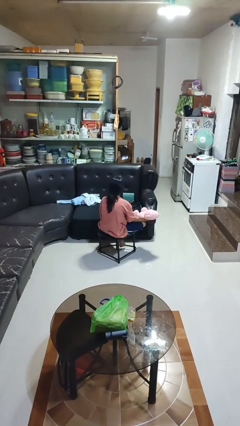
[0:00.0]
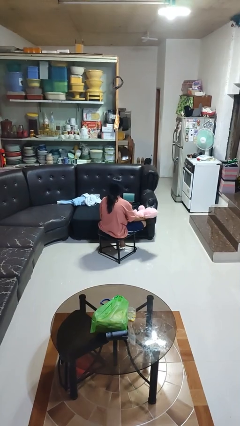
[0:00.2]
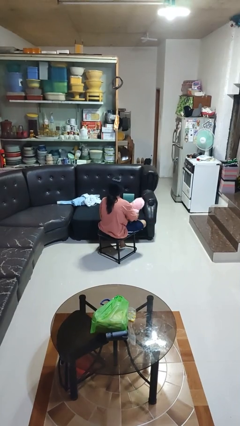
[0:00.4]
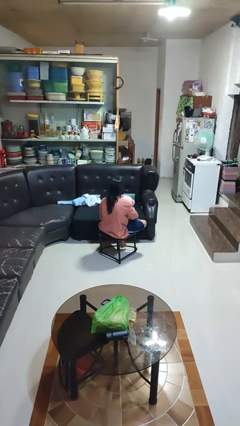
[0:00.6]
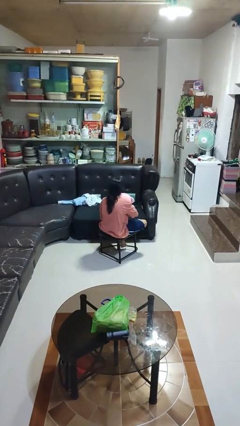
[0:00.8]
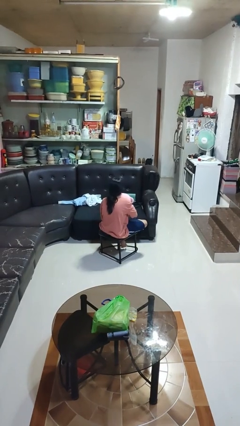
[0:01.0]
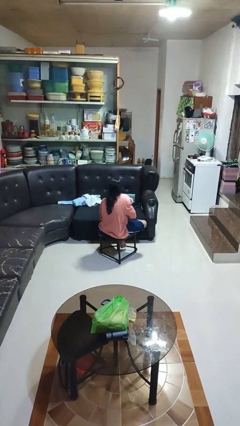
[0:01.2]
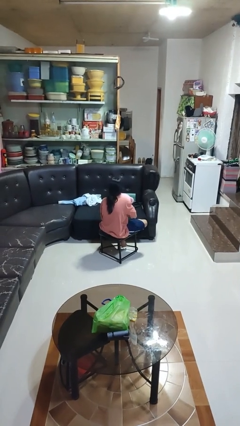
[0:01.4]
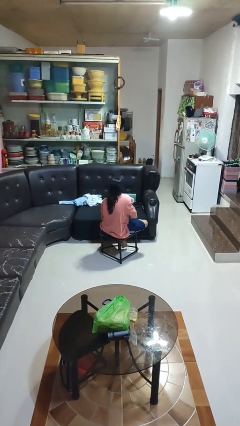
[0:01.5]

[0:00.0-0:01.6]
person hugs stuffed animal

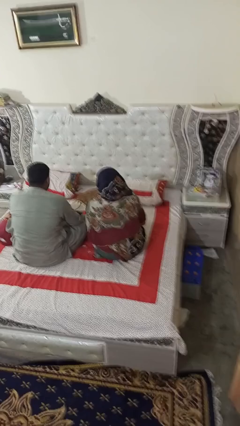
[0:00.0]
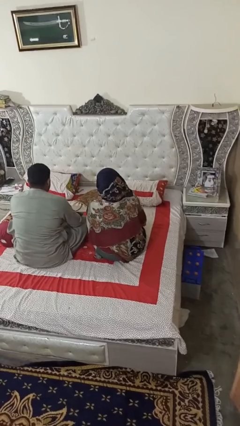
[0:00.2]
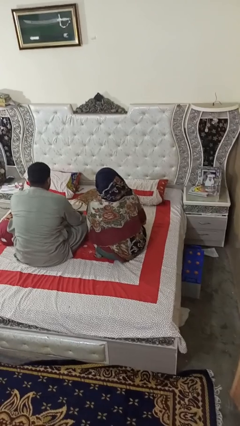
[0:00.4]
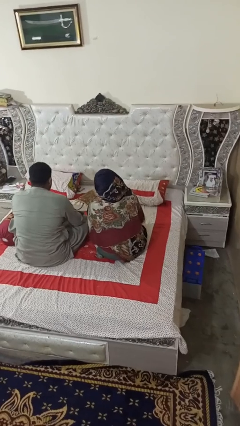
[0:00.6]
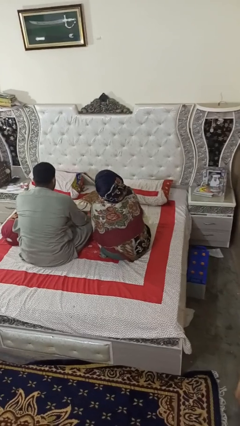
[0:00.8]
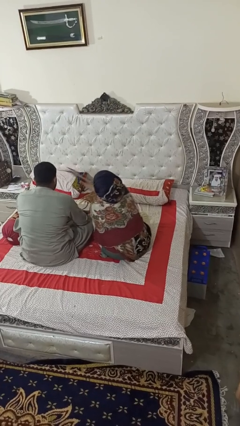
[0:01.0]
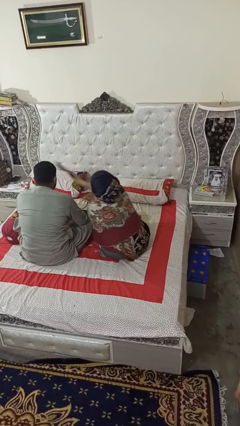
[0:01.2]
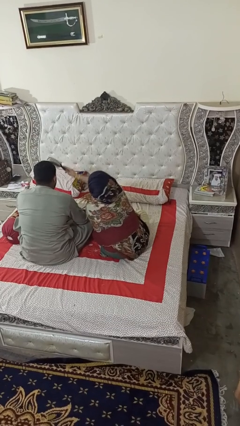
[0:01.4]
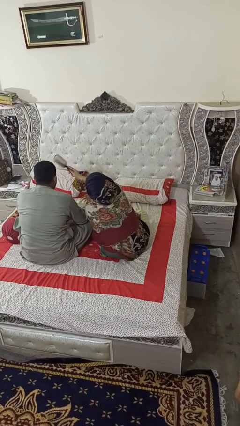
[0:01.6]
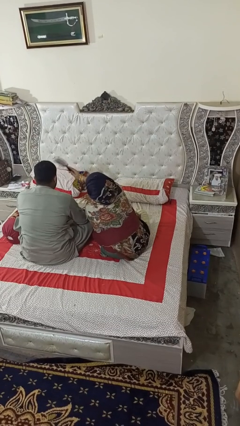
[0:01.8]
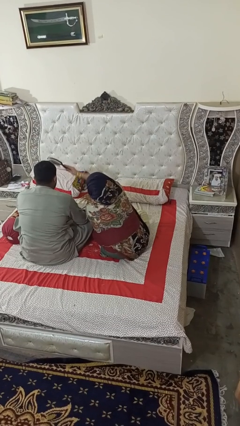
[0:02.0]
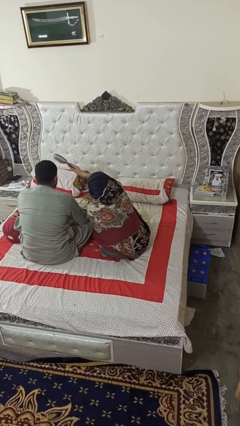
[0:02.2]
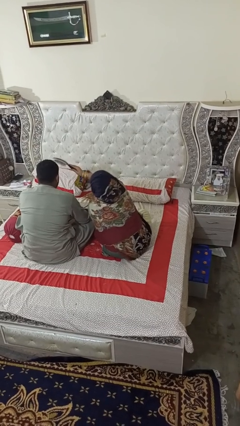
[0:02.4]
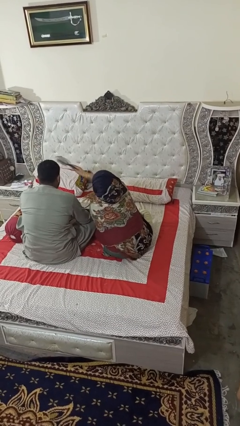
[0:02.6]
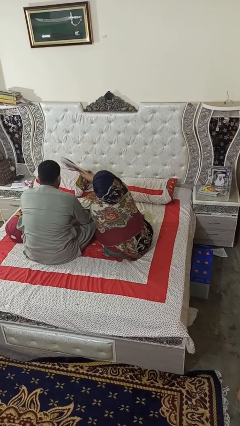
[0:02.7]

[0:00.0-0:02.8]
person brushes hair of person

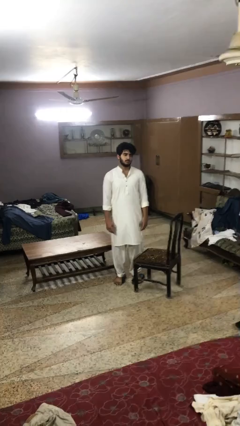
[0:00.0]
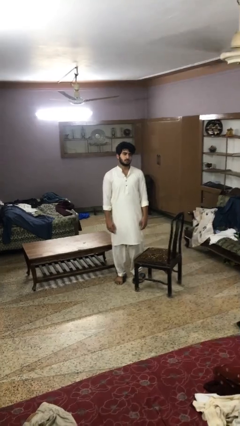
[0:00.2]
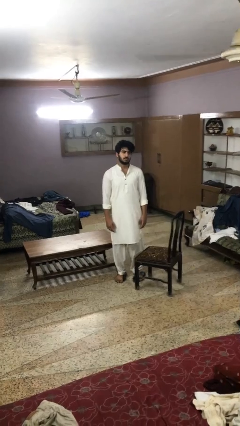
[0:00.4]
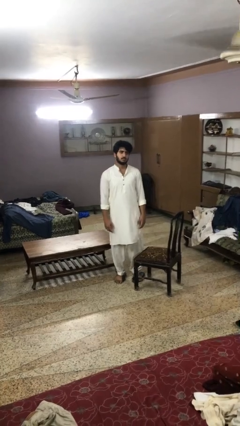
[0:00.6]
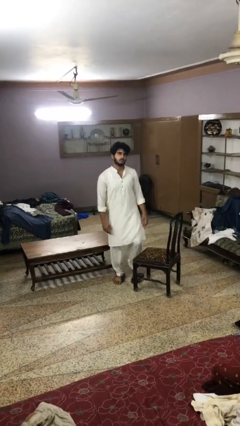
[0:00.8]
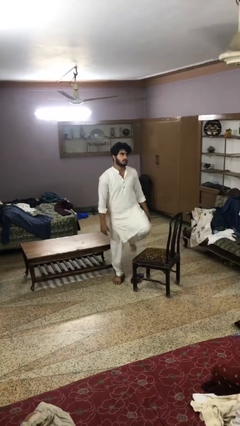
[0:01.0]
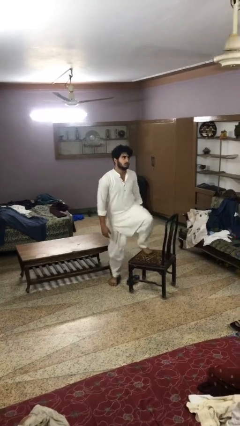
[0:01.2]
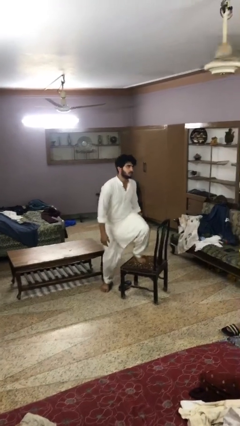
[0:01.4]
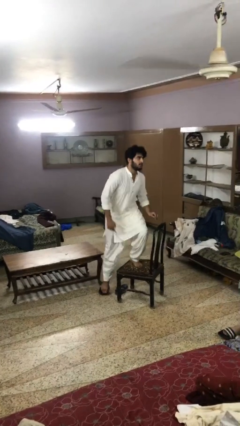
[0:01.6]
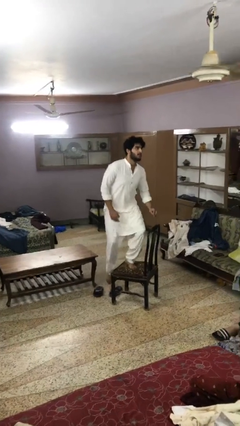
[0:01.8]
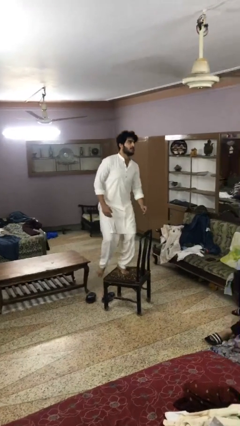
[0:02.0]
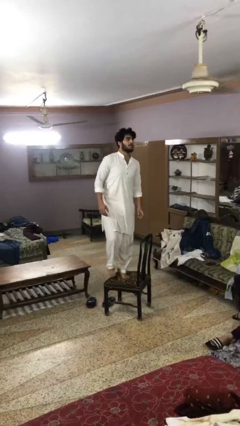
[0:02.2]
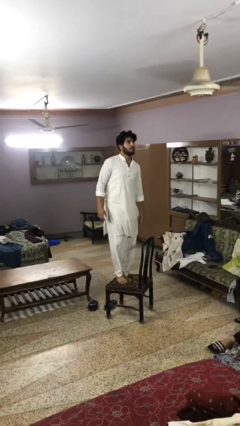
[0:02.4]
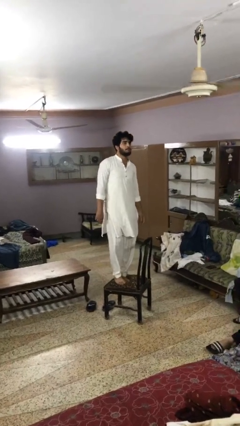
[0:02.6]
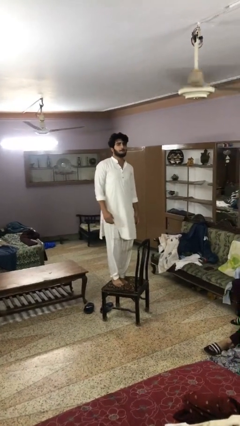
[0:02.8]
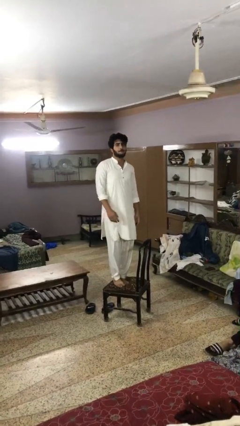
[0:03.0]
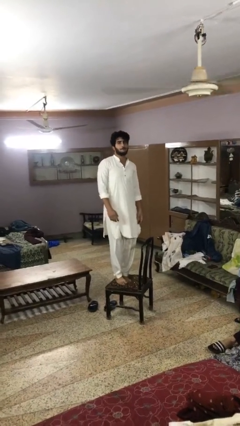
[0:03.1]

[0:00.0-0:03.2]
person climbs on chair

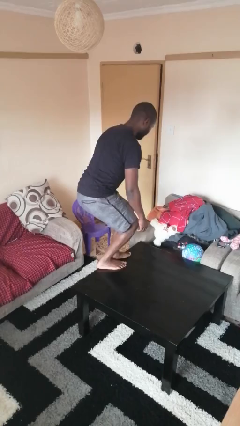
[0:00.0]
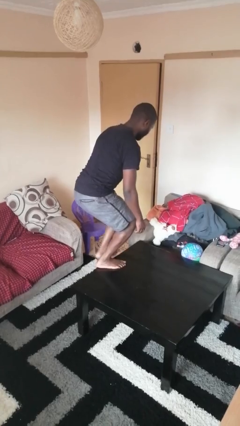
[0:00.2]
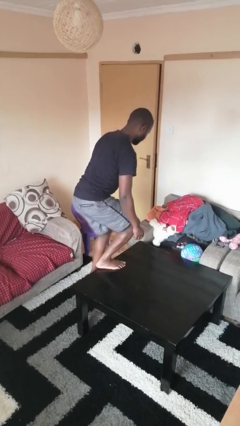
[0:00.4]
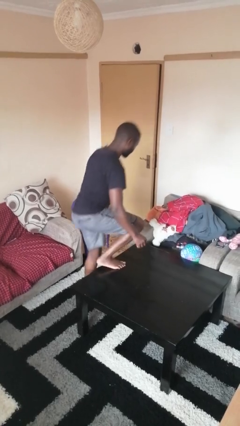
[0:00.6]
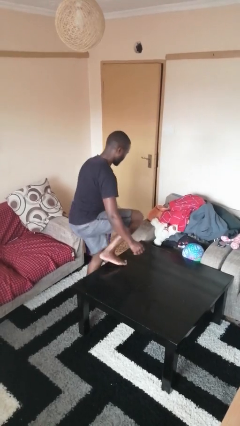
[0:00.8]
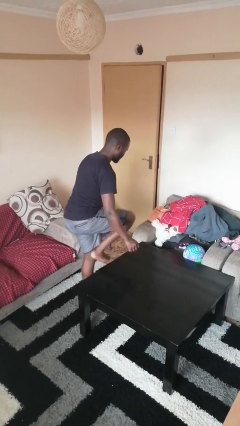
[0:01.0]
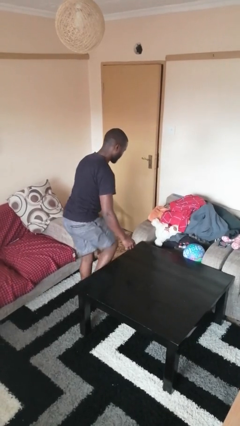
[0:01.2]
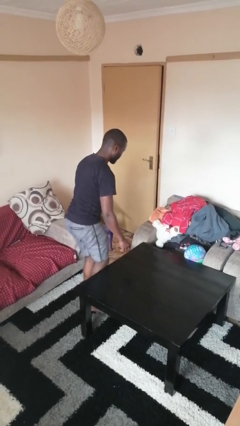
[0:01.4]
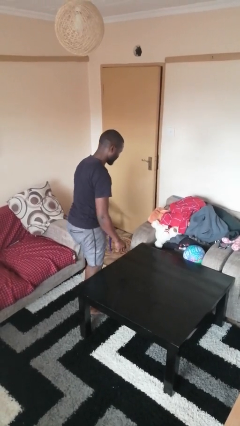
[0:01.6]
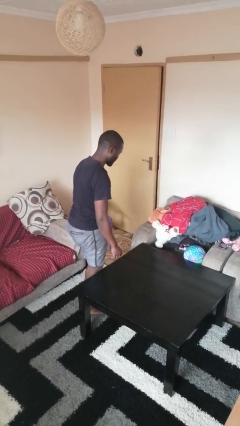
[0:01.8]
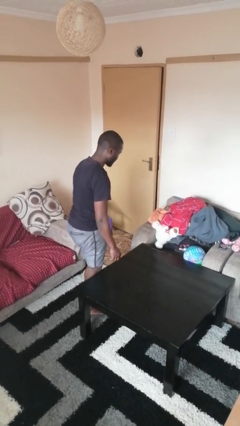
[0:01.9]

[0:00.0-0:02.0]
person climbs off table

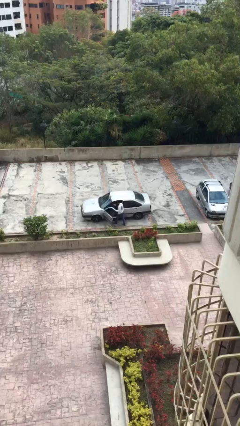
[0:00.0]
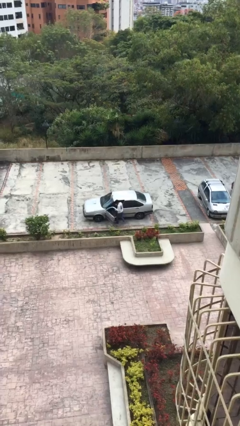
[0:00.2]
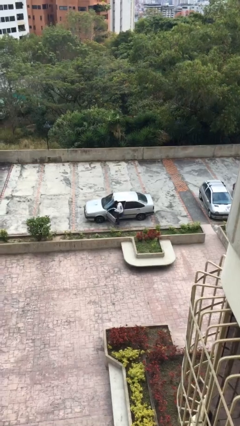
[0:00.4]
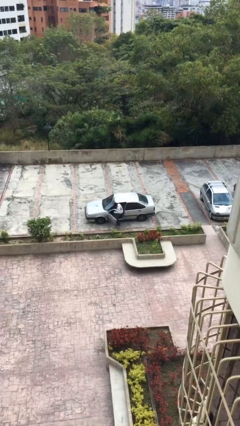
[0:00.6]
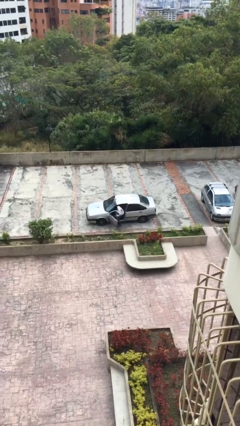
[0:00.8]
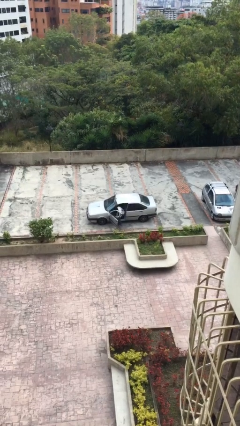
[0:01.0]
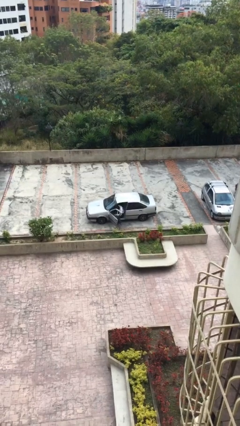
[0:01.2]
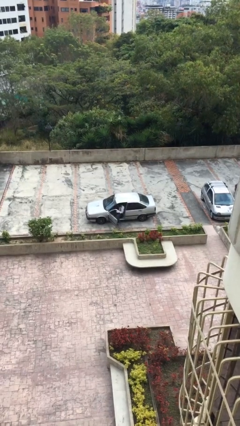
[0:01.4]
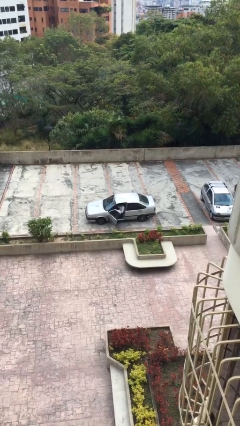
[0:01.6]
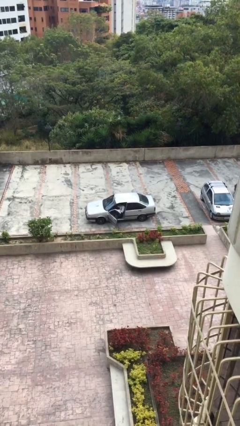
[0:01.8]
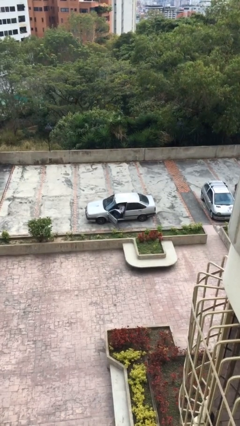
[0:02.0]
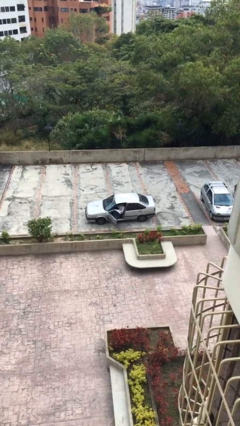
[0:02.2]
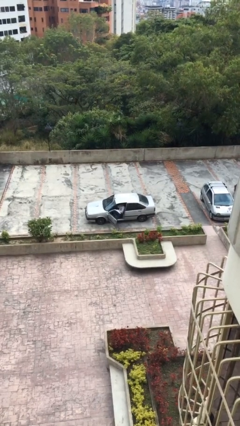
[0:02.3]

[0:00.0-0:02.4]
person enters car

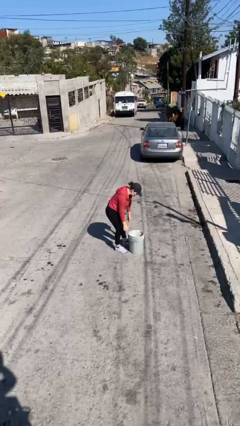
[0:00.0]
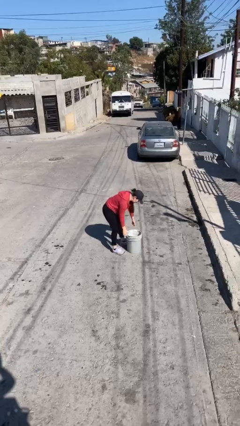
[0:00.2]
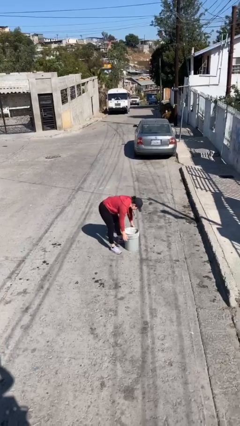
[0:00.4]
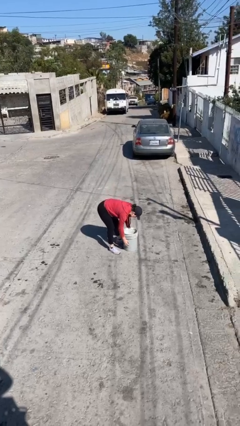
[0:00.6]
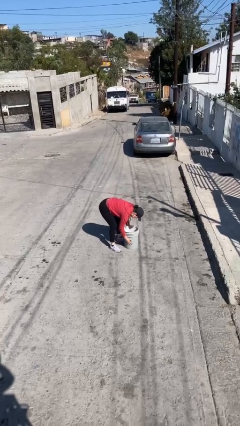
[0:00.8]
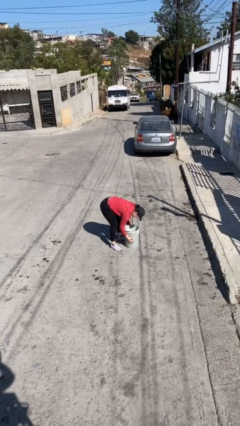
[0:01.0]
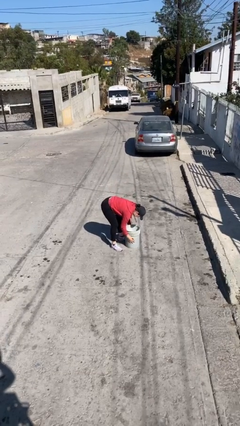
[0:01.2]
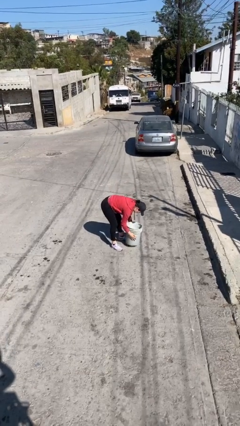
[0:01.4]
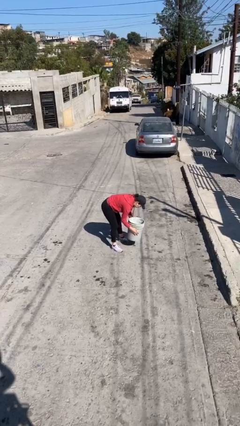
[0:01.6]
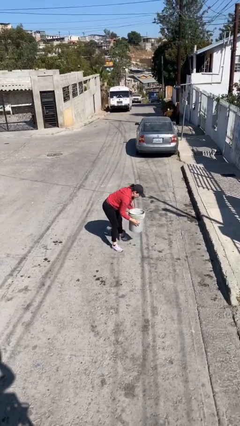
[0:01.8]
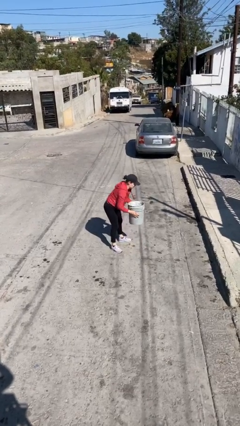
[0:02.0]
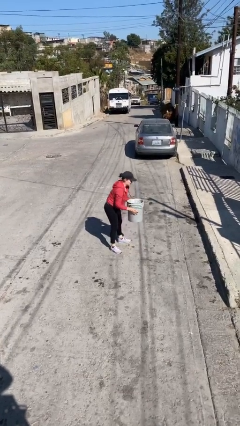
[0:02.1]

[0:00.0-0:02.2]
person picks up object from floor

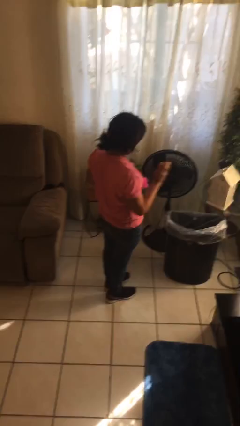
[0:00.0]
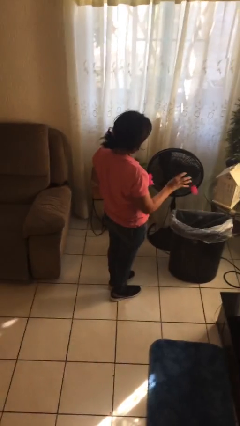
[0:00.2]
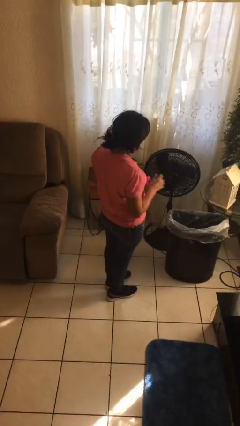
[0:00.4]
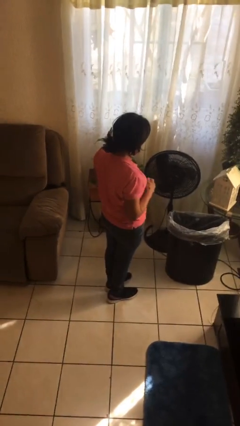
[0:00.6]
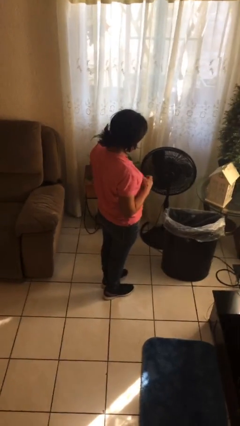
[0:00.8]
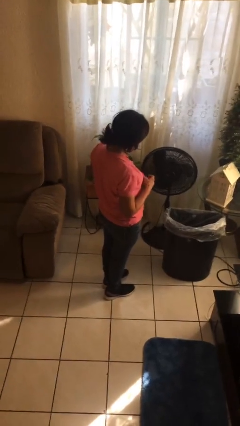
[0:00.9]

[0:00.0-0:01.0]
person discards trash

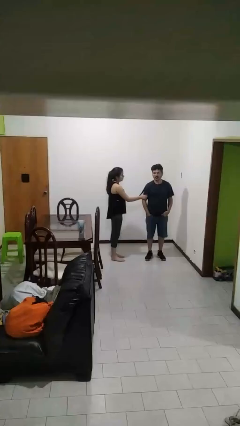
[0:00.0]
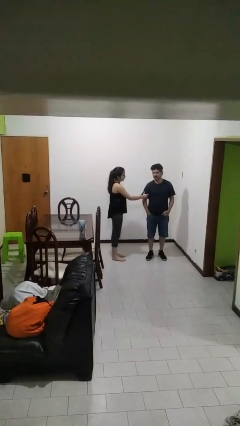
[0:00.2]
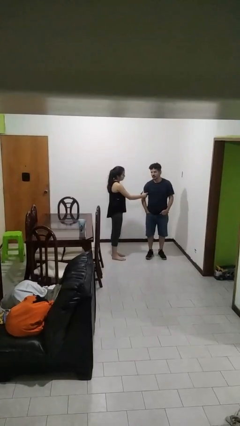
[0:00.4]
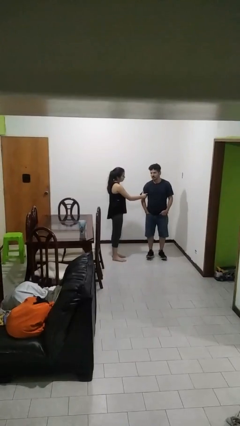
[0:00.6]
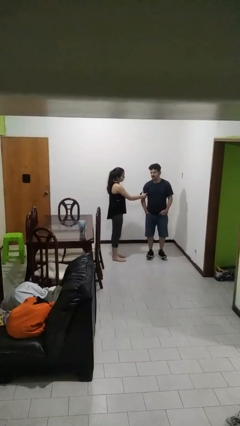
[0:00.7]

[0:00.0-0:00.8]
person grabs person by bicep

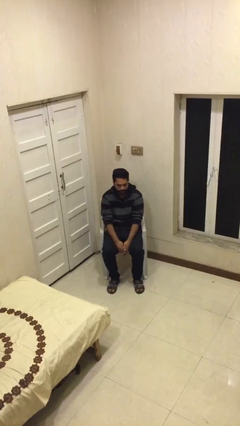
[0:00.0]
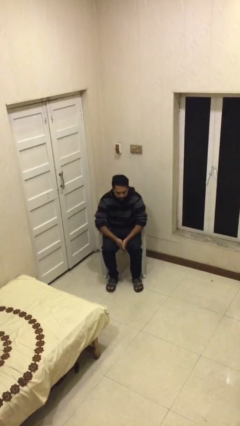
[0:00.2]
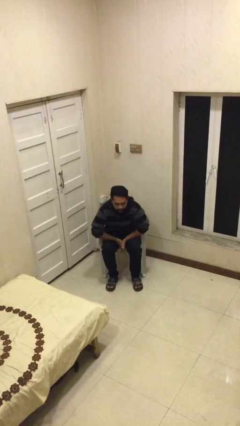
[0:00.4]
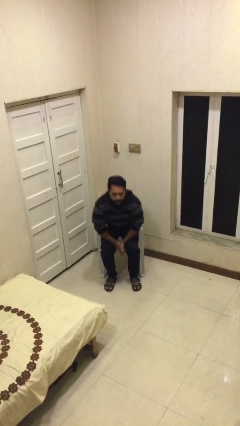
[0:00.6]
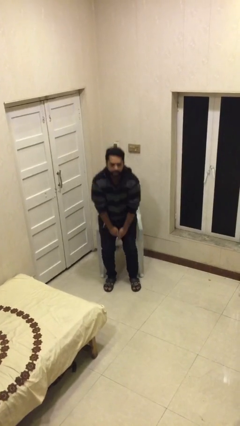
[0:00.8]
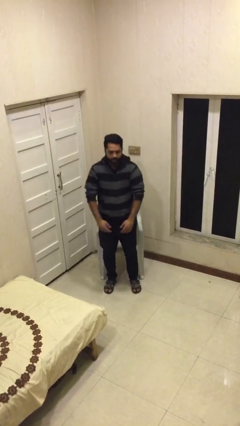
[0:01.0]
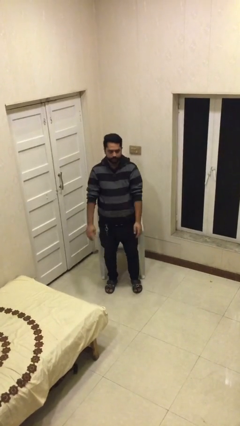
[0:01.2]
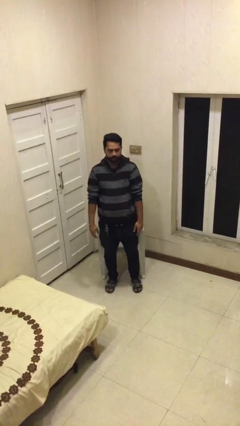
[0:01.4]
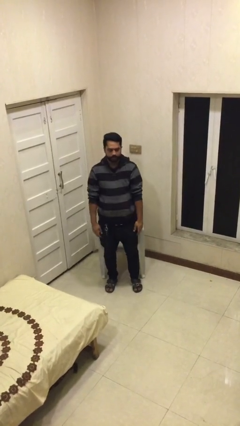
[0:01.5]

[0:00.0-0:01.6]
person stands up
